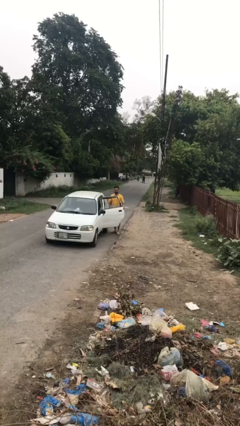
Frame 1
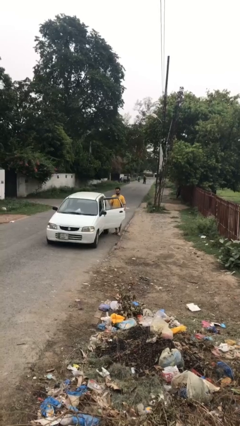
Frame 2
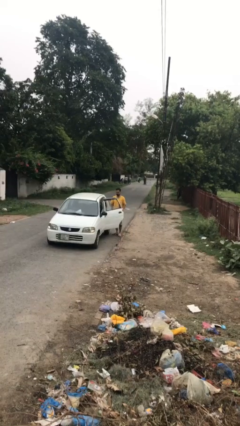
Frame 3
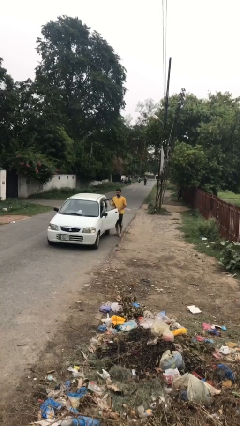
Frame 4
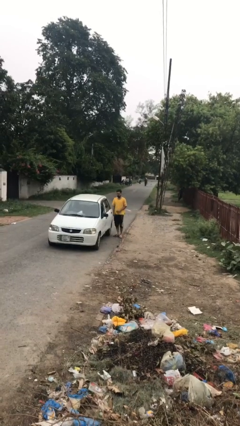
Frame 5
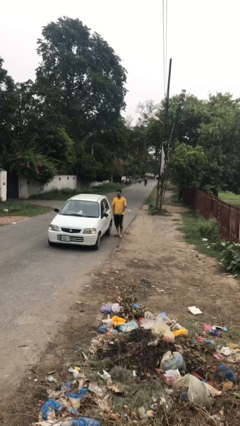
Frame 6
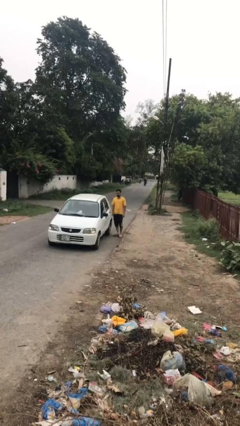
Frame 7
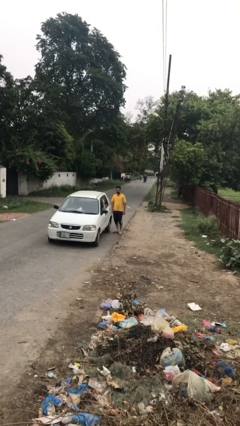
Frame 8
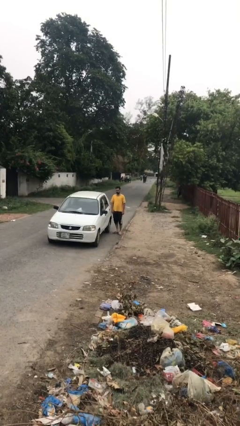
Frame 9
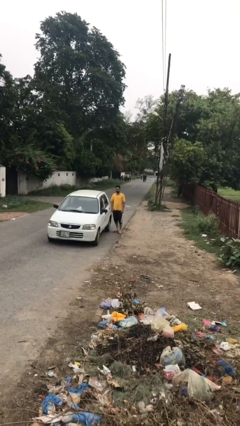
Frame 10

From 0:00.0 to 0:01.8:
person closes car door

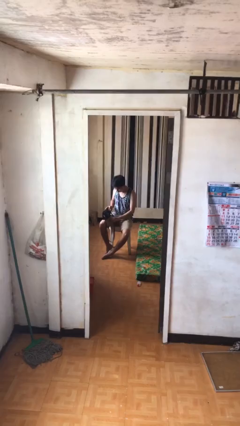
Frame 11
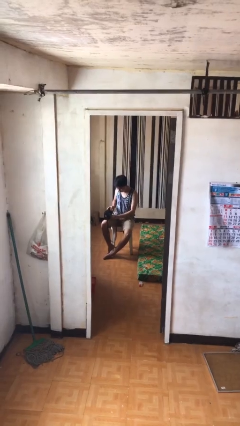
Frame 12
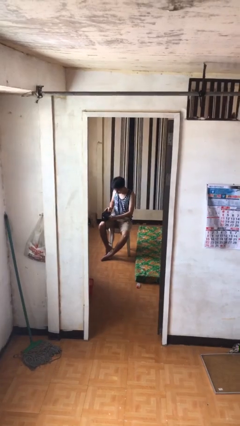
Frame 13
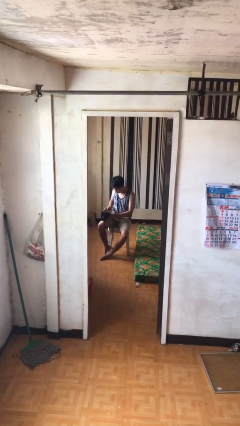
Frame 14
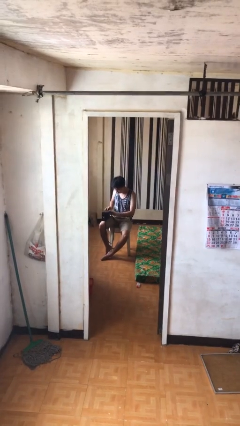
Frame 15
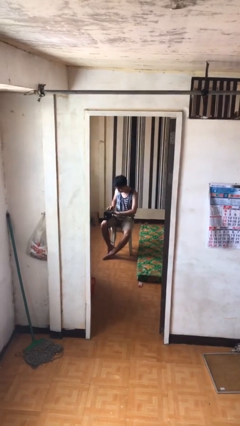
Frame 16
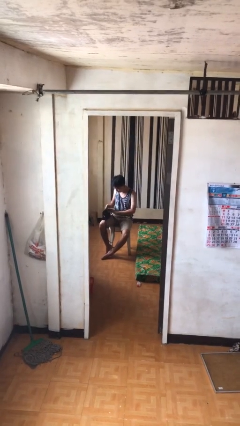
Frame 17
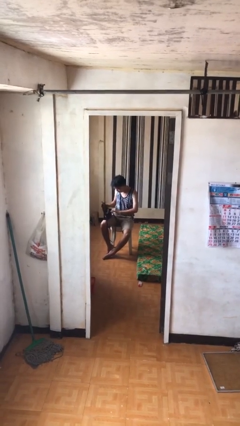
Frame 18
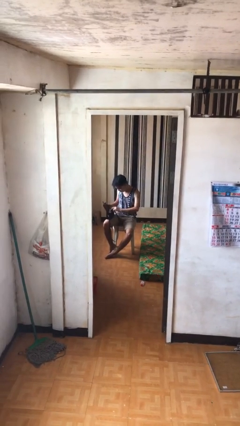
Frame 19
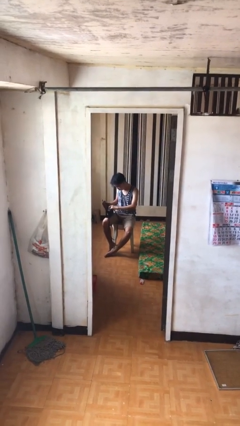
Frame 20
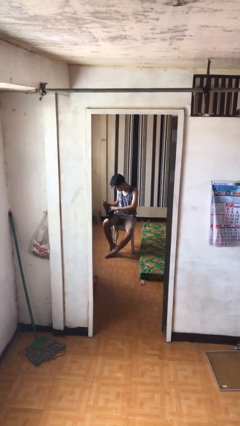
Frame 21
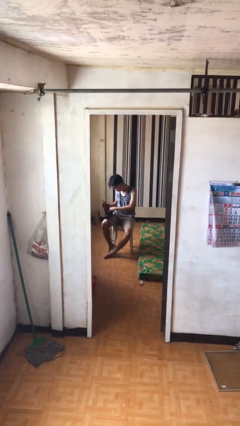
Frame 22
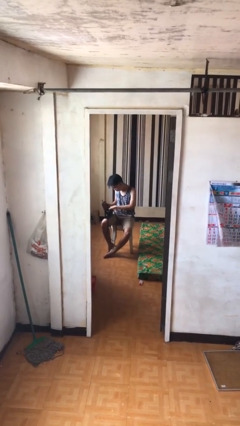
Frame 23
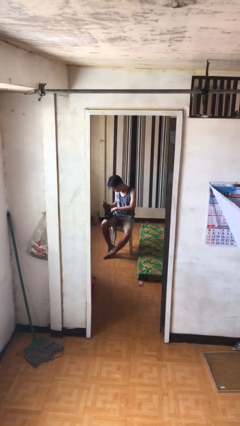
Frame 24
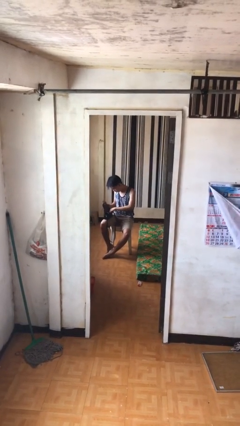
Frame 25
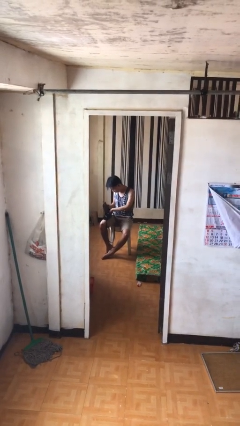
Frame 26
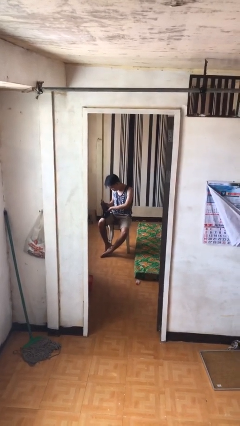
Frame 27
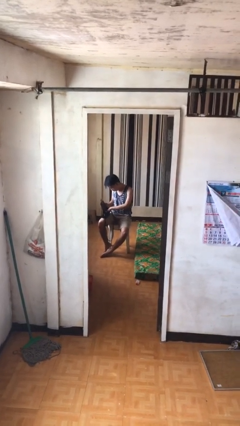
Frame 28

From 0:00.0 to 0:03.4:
person searches in purse

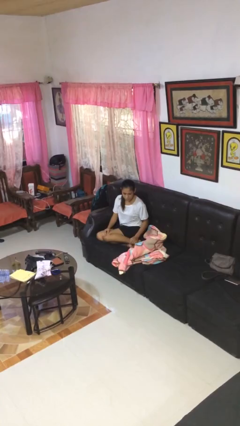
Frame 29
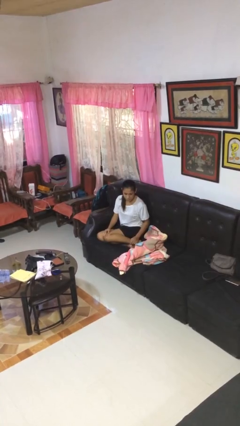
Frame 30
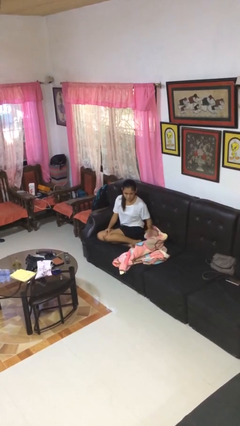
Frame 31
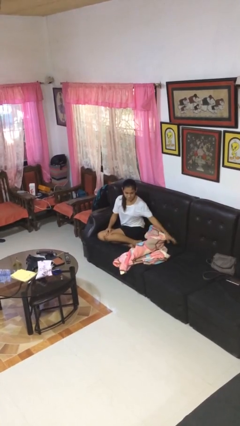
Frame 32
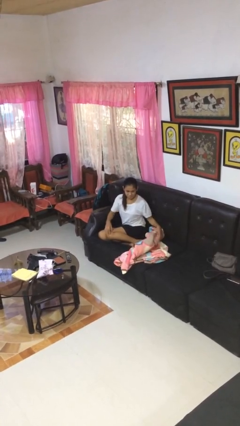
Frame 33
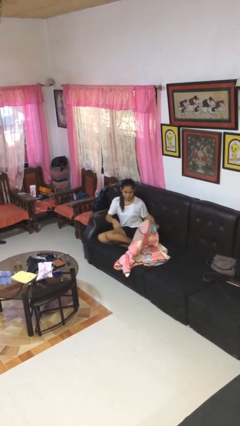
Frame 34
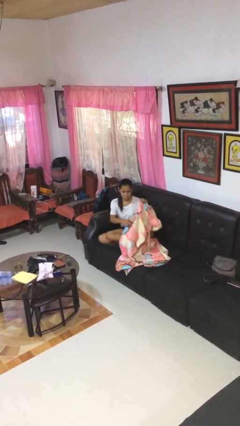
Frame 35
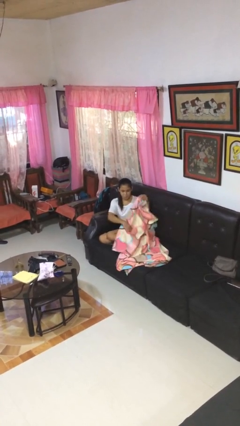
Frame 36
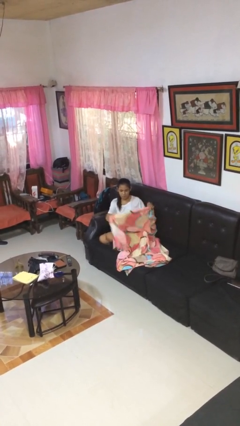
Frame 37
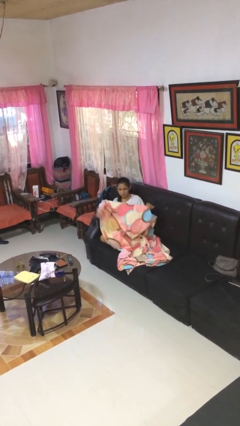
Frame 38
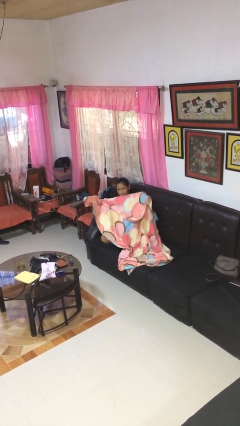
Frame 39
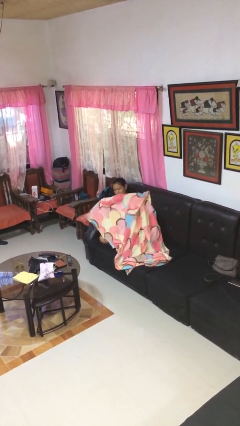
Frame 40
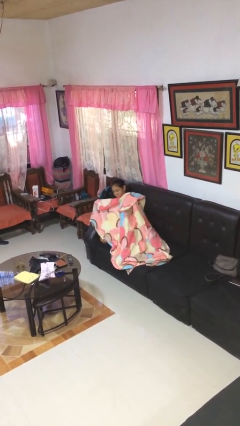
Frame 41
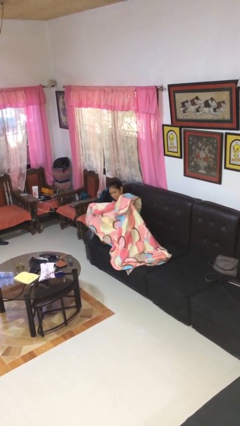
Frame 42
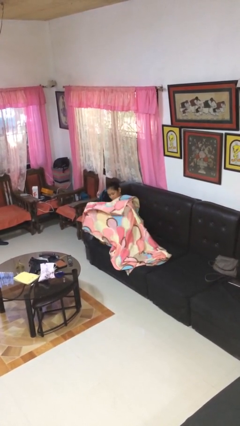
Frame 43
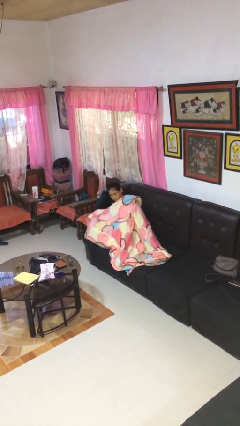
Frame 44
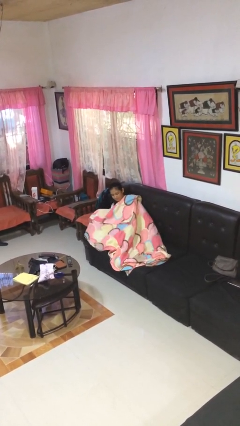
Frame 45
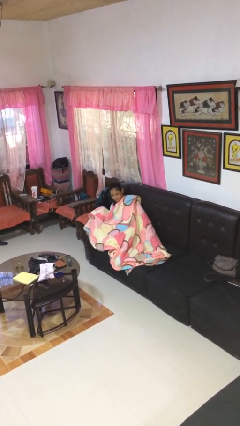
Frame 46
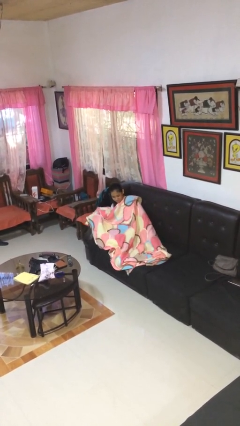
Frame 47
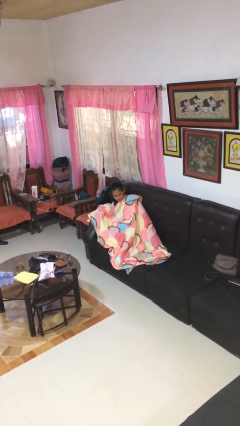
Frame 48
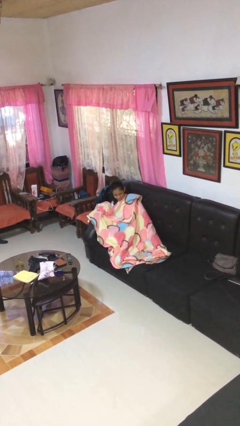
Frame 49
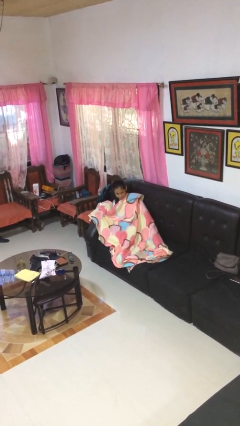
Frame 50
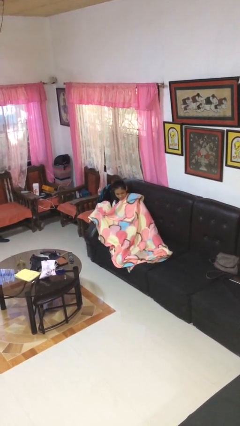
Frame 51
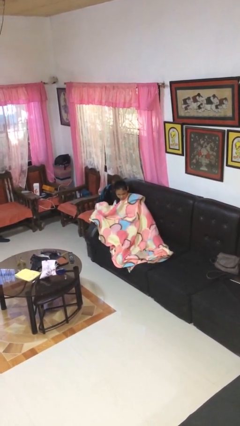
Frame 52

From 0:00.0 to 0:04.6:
person covers with blanket

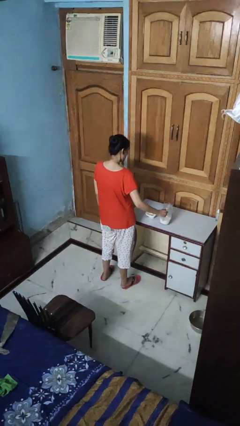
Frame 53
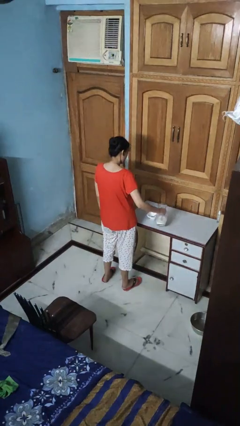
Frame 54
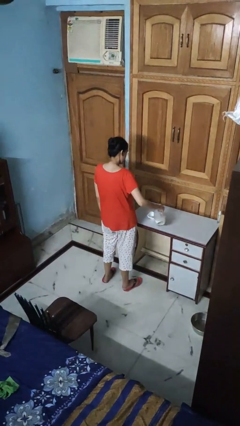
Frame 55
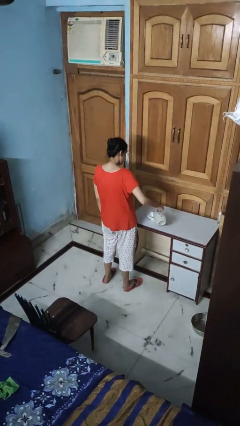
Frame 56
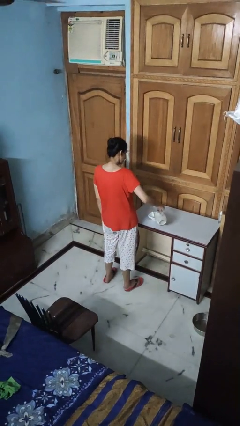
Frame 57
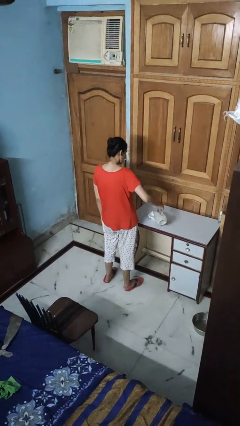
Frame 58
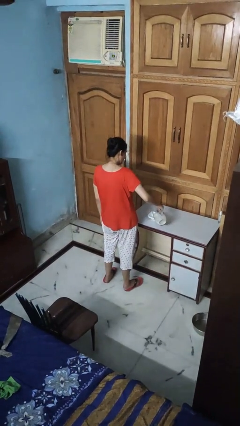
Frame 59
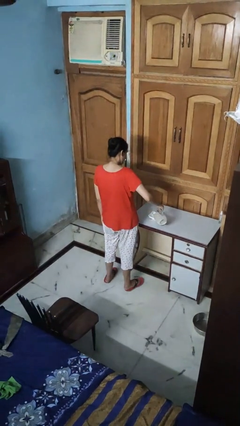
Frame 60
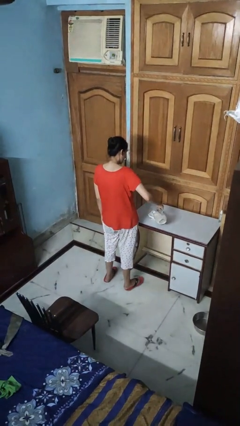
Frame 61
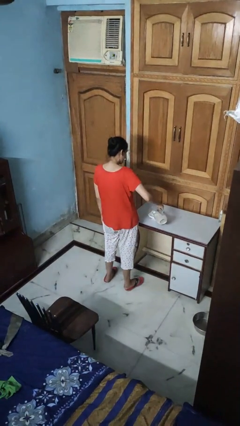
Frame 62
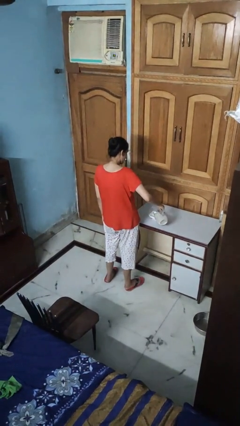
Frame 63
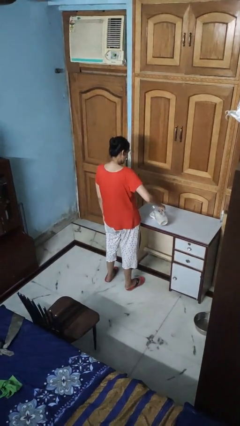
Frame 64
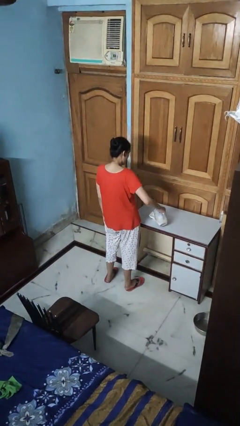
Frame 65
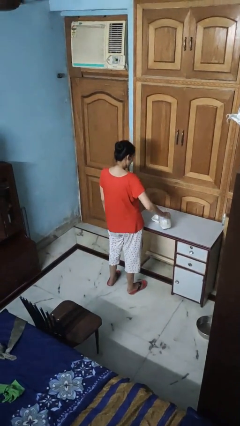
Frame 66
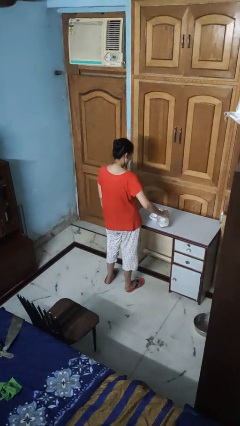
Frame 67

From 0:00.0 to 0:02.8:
person pours into bowl

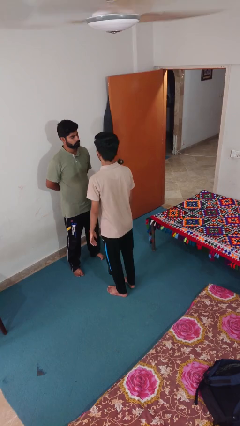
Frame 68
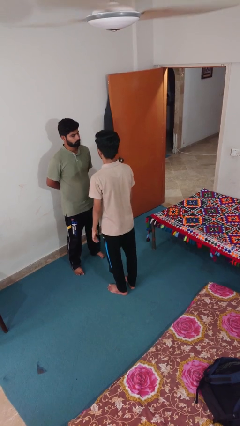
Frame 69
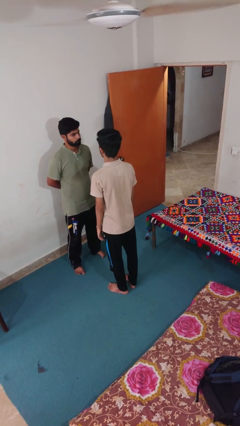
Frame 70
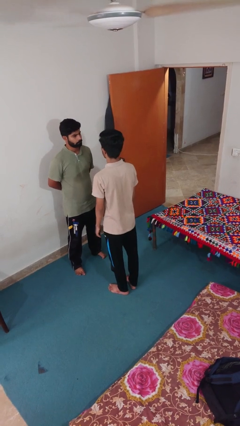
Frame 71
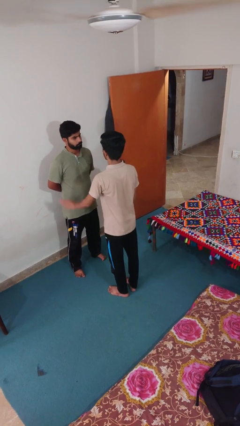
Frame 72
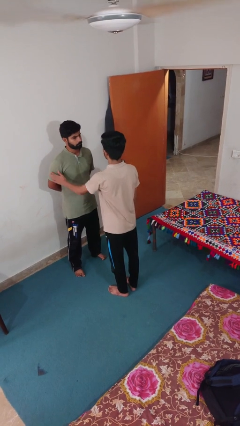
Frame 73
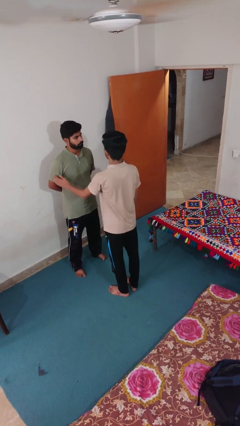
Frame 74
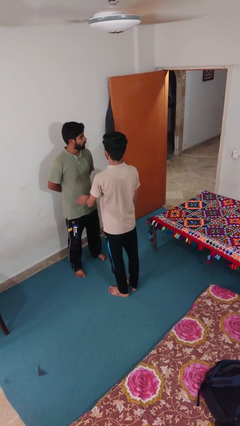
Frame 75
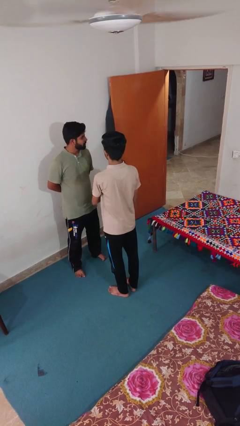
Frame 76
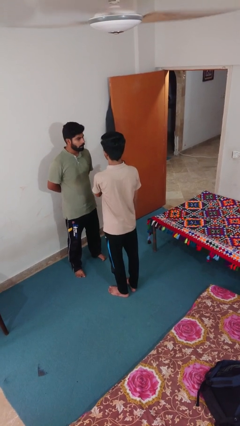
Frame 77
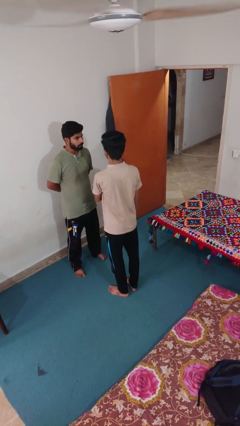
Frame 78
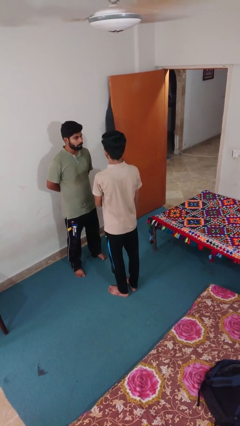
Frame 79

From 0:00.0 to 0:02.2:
person shoves person

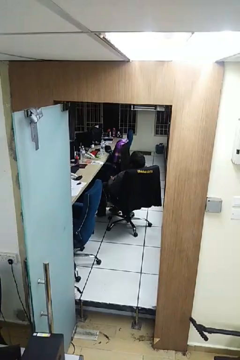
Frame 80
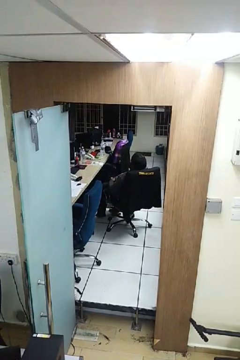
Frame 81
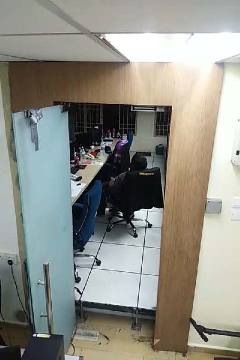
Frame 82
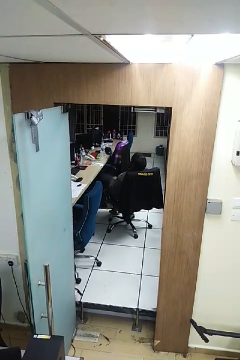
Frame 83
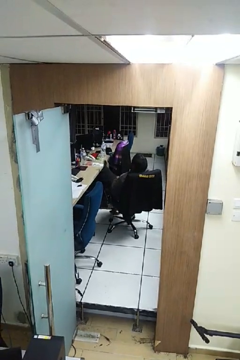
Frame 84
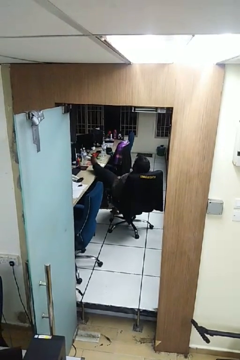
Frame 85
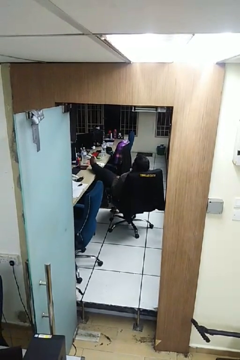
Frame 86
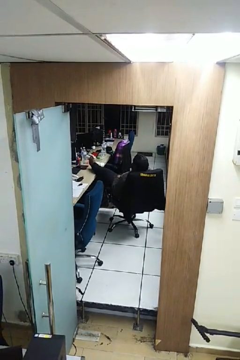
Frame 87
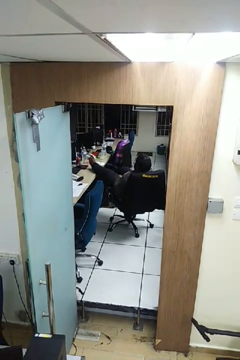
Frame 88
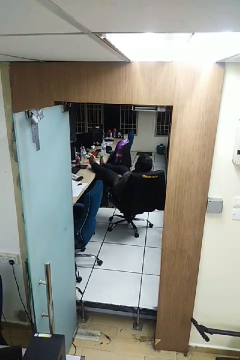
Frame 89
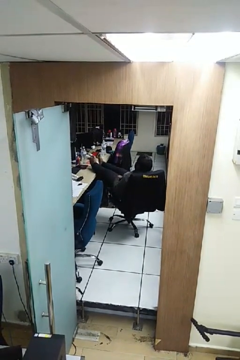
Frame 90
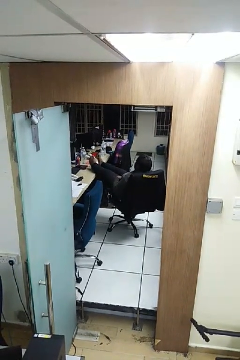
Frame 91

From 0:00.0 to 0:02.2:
person puts feet up

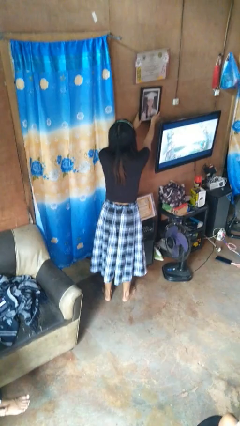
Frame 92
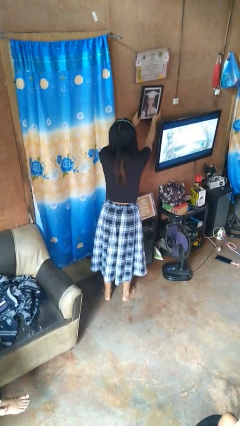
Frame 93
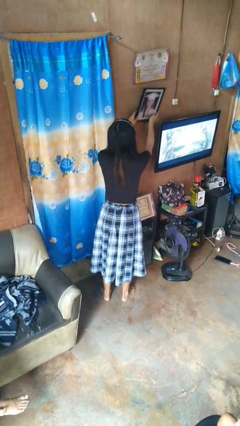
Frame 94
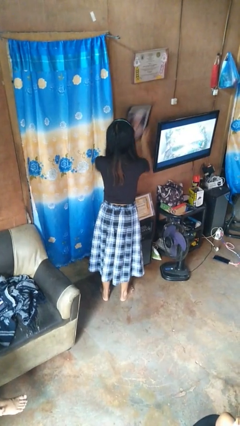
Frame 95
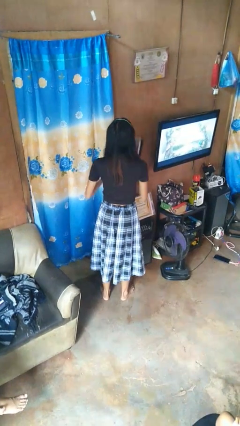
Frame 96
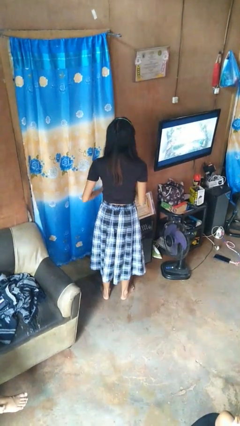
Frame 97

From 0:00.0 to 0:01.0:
person takes down picture frame
